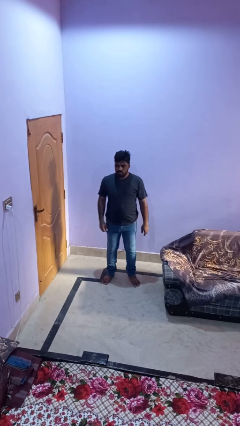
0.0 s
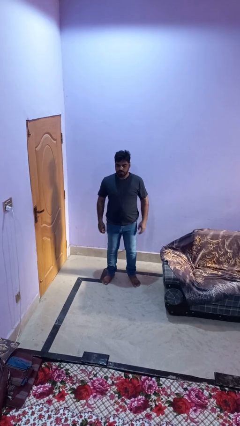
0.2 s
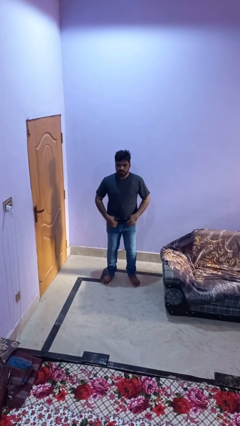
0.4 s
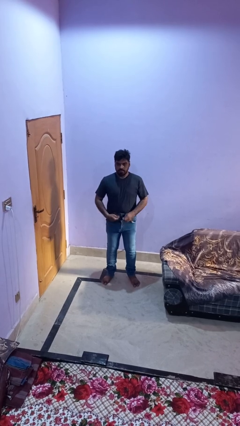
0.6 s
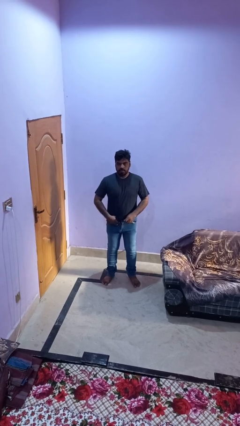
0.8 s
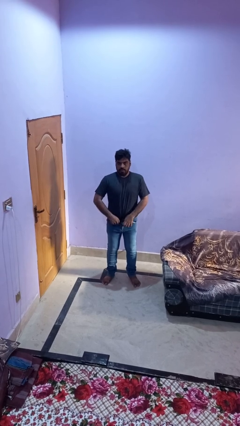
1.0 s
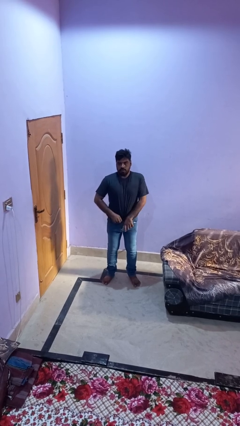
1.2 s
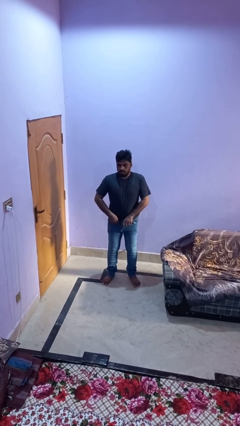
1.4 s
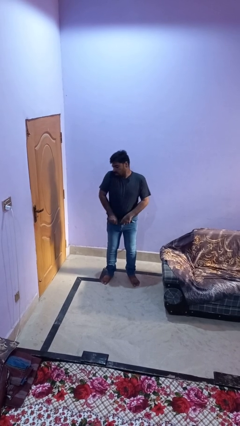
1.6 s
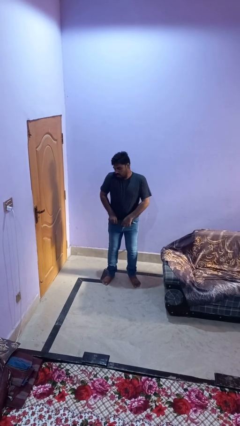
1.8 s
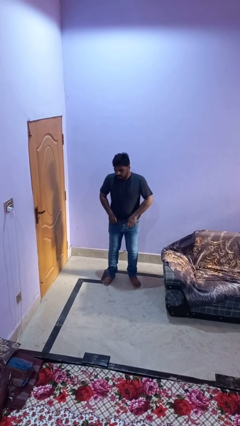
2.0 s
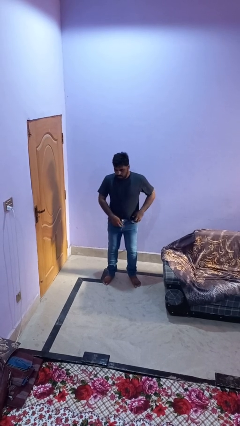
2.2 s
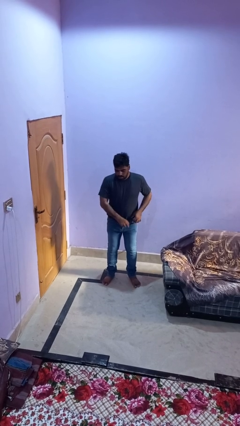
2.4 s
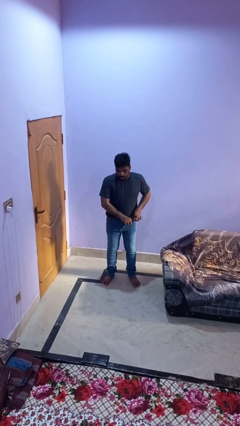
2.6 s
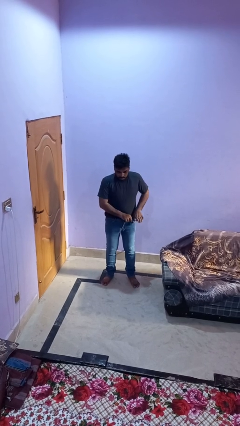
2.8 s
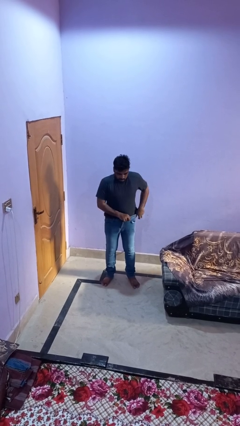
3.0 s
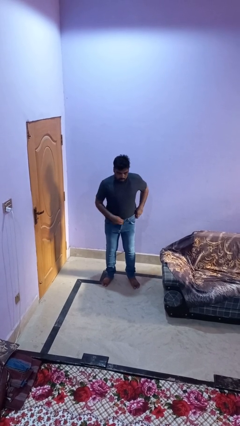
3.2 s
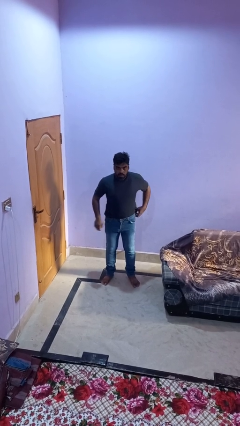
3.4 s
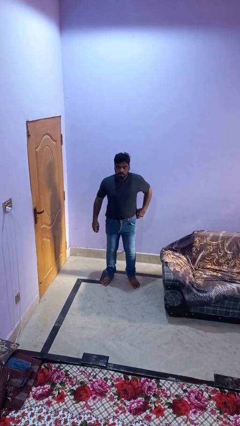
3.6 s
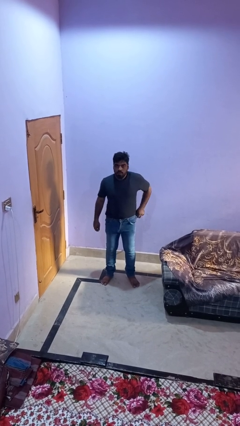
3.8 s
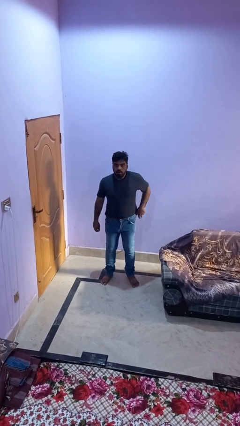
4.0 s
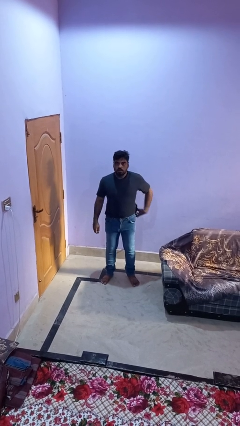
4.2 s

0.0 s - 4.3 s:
person tucks in shirt

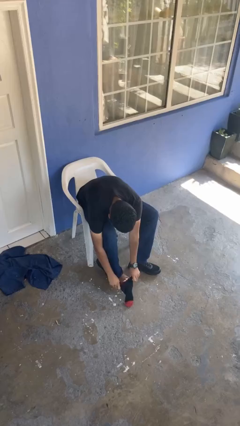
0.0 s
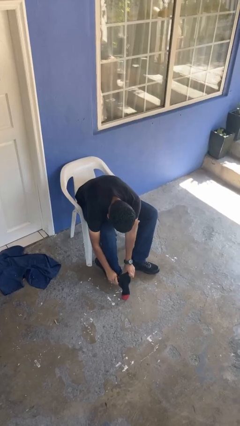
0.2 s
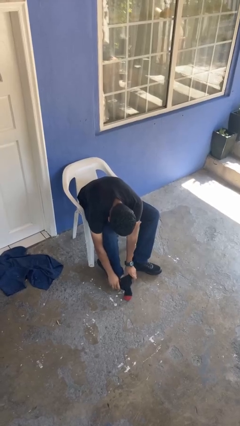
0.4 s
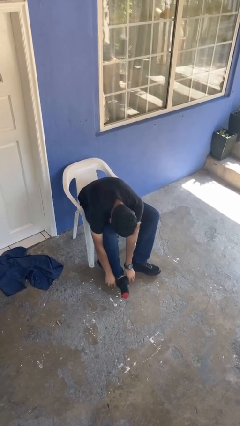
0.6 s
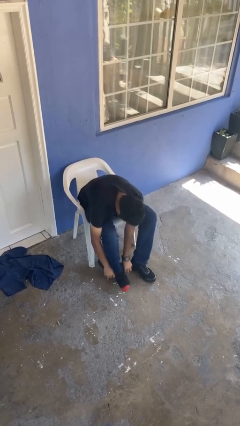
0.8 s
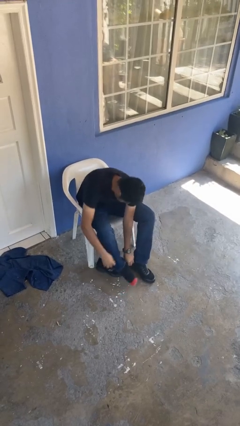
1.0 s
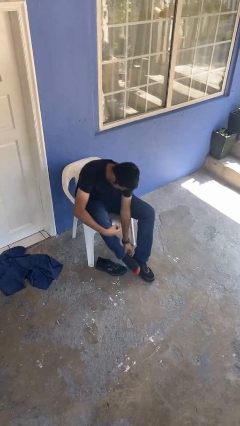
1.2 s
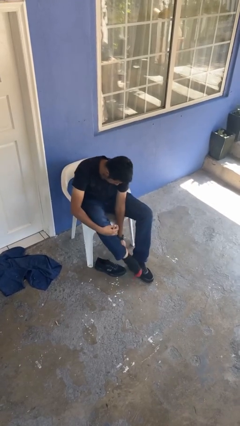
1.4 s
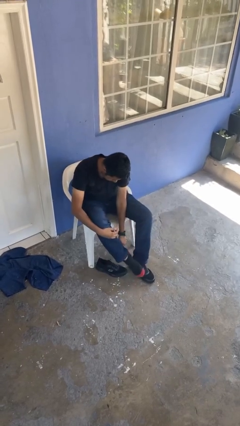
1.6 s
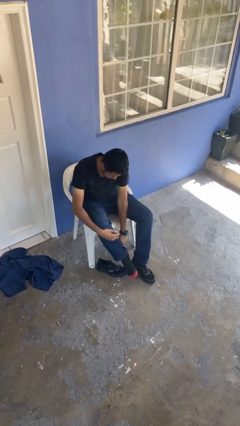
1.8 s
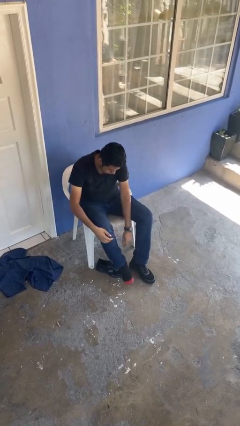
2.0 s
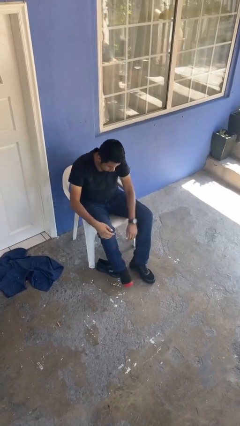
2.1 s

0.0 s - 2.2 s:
person puts on socks

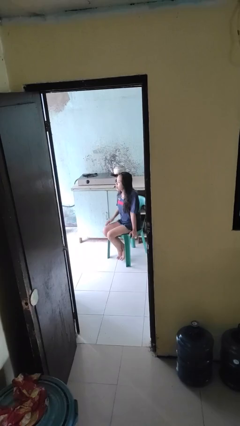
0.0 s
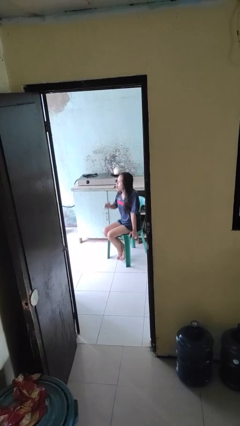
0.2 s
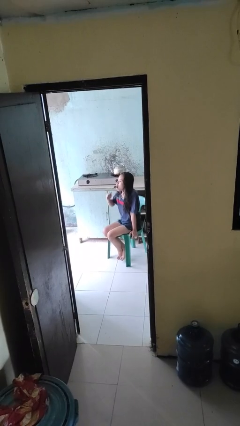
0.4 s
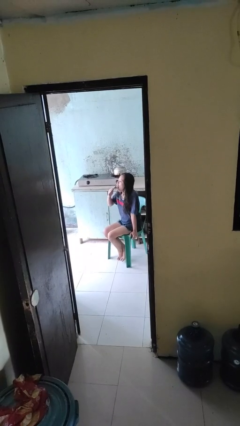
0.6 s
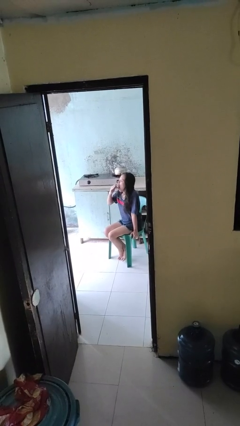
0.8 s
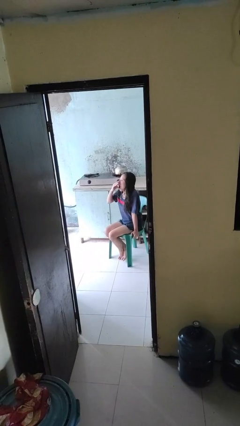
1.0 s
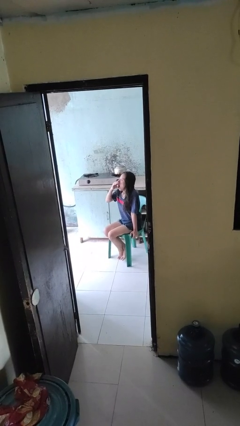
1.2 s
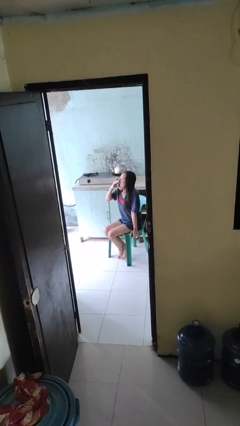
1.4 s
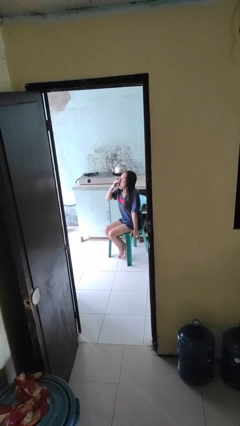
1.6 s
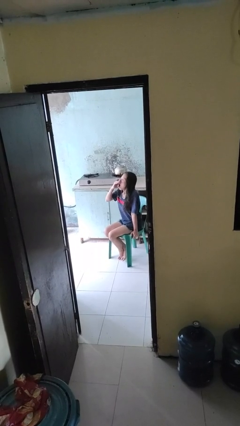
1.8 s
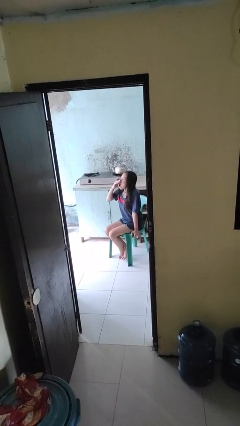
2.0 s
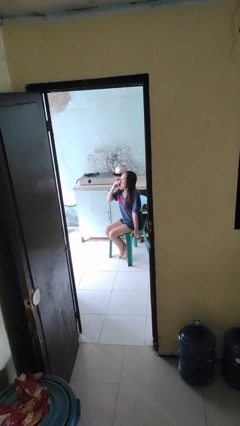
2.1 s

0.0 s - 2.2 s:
person yawns

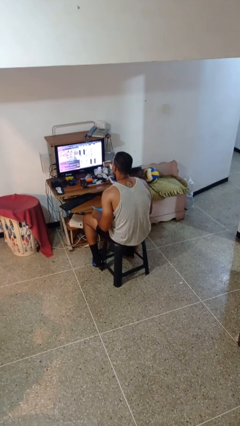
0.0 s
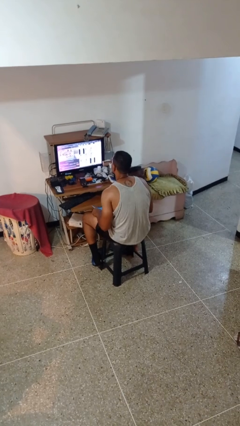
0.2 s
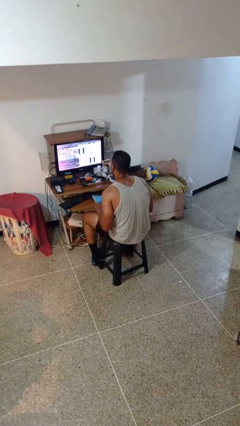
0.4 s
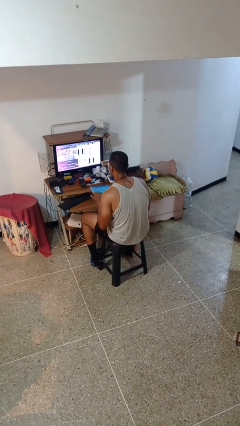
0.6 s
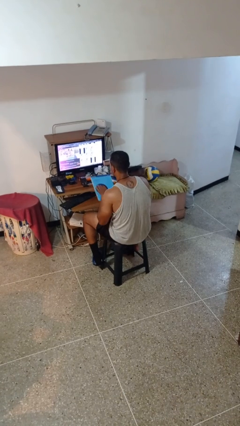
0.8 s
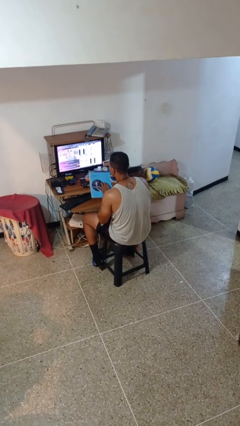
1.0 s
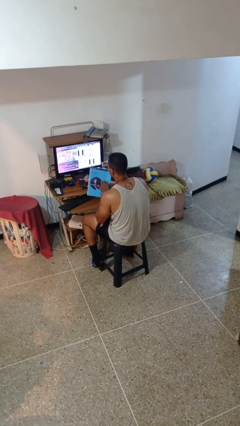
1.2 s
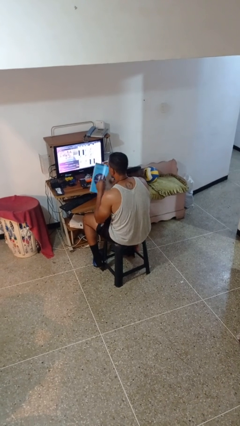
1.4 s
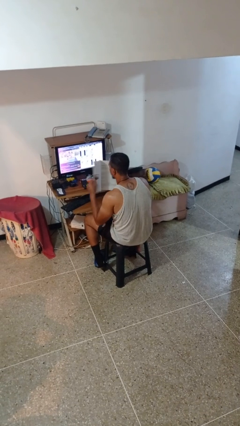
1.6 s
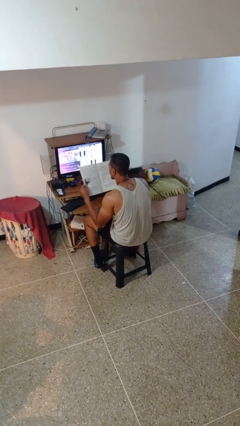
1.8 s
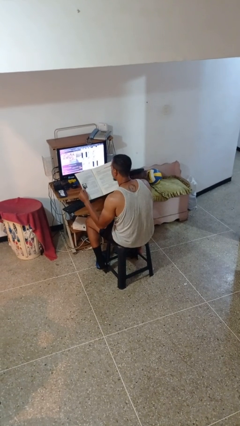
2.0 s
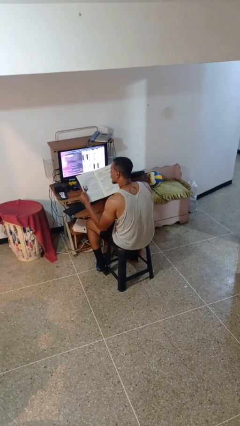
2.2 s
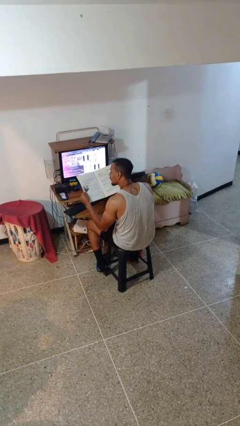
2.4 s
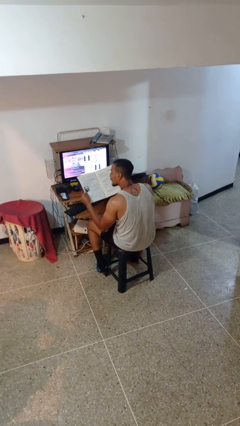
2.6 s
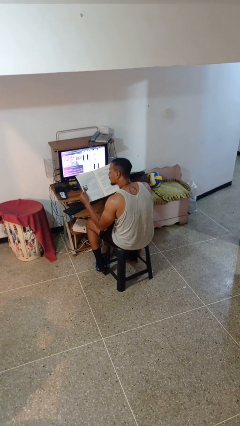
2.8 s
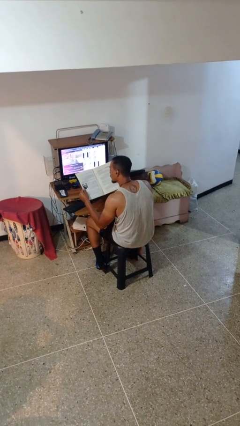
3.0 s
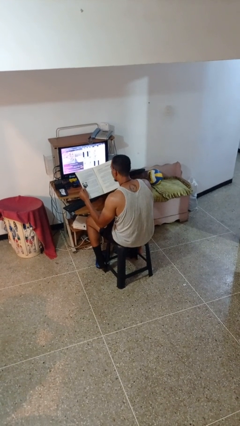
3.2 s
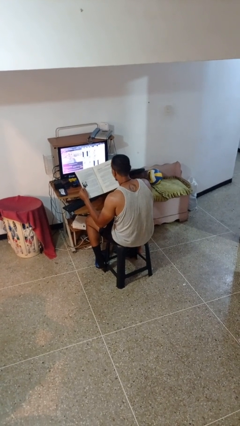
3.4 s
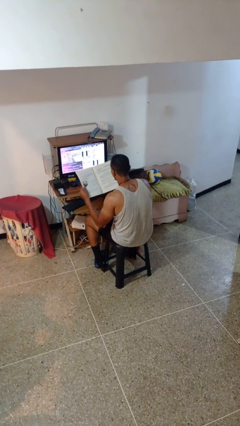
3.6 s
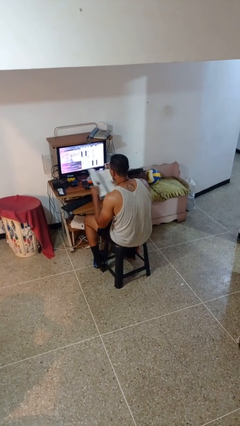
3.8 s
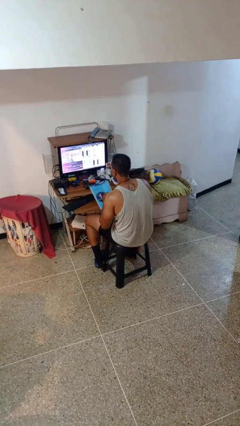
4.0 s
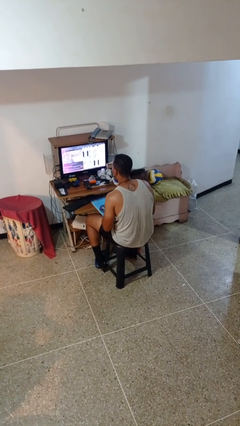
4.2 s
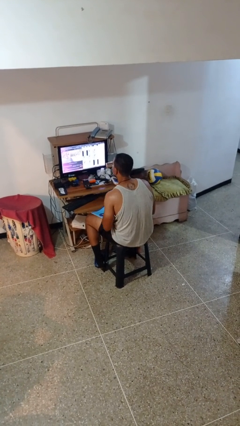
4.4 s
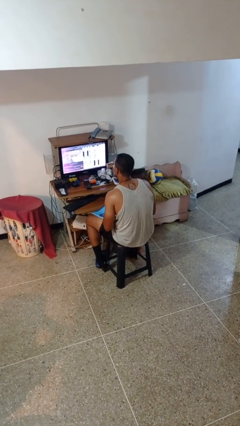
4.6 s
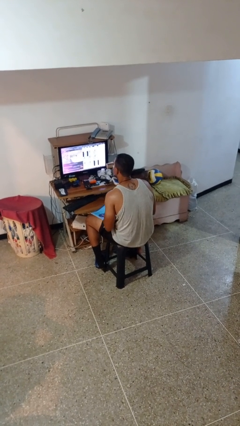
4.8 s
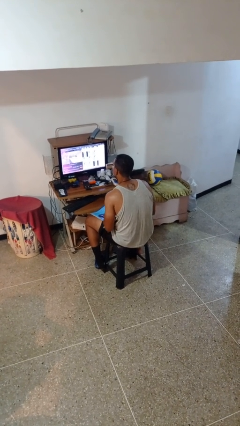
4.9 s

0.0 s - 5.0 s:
person reads magazine

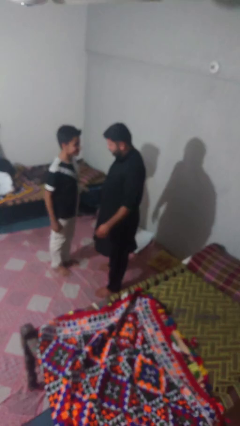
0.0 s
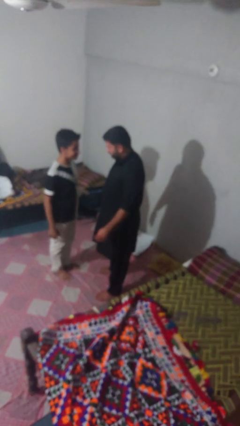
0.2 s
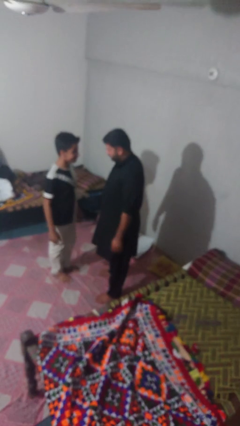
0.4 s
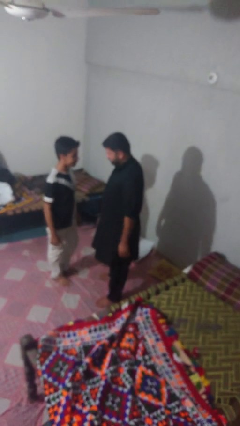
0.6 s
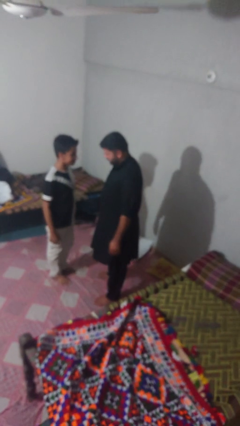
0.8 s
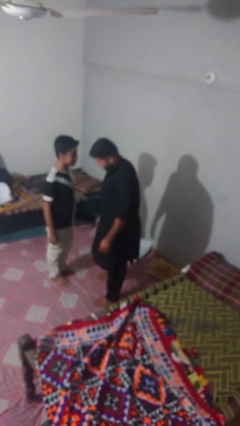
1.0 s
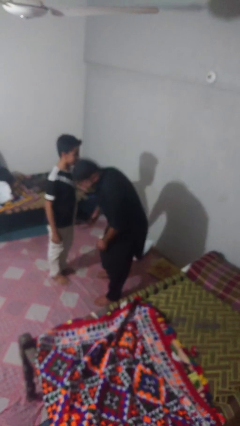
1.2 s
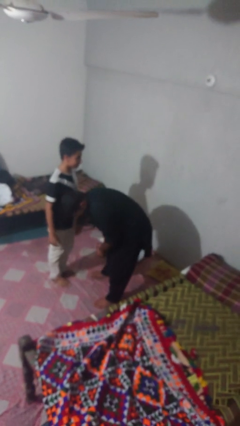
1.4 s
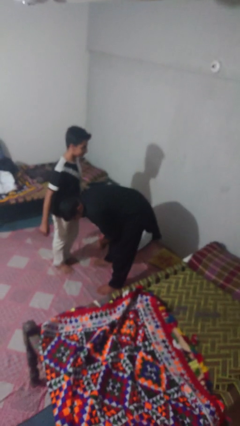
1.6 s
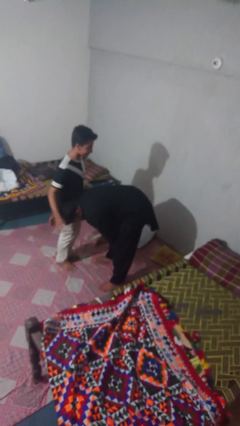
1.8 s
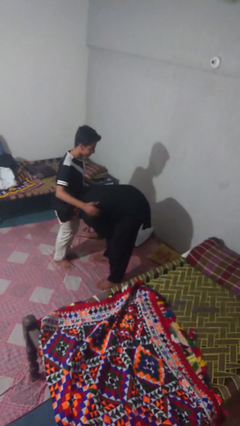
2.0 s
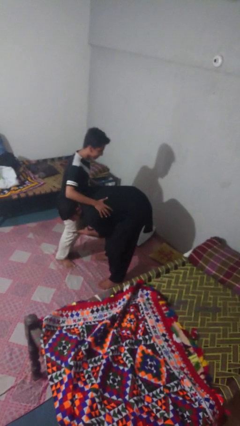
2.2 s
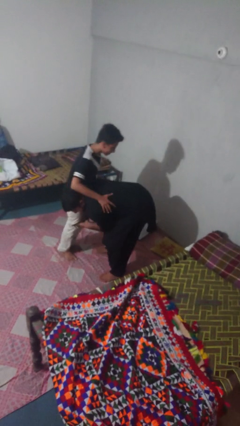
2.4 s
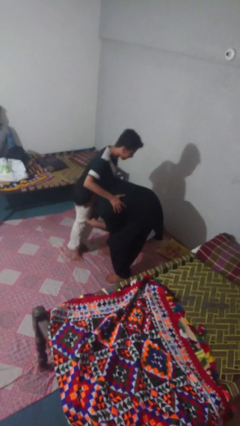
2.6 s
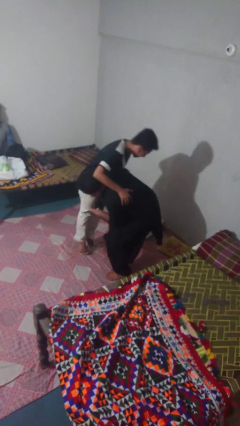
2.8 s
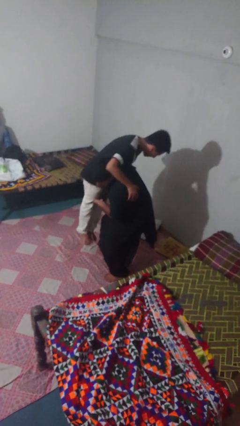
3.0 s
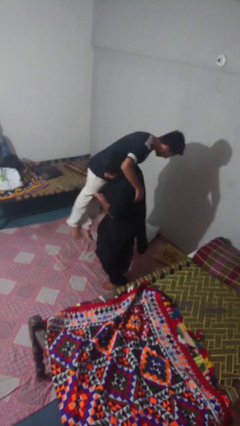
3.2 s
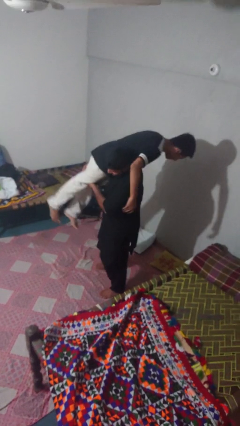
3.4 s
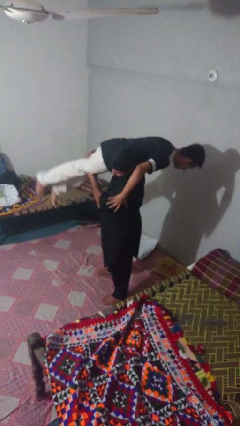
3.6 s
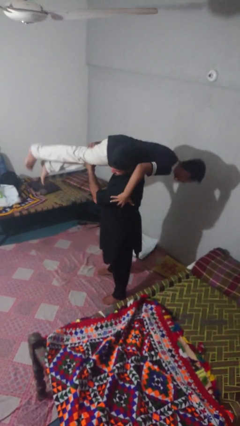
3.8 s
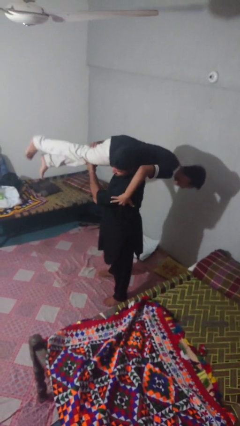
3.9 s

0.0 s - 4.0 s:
person carries person over shoulder
